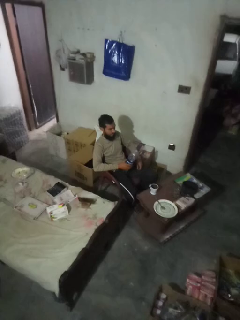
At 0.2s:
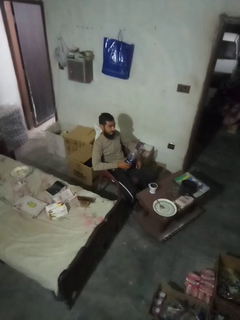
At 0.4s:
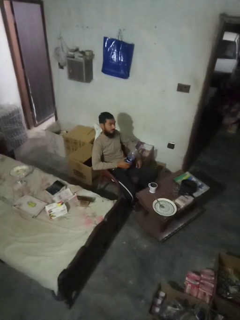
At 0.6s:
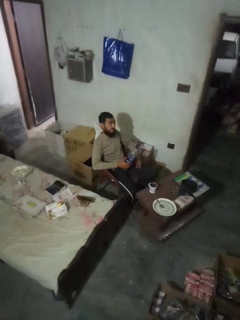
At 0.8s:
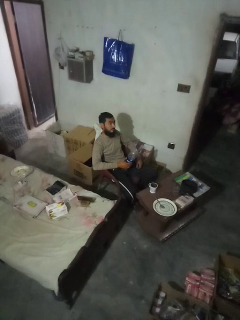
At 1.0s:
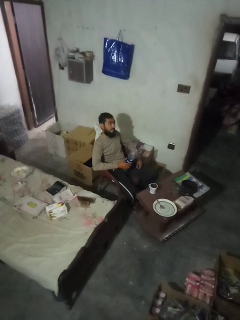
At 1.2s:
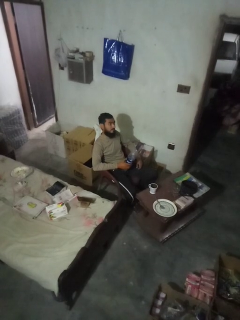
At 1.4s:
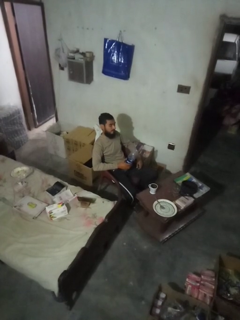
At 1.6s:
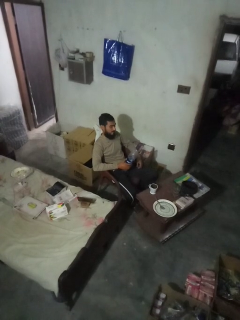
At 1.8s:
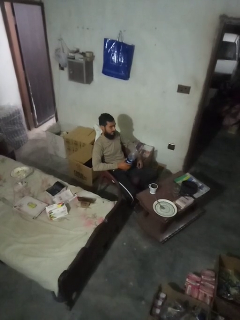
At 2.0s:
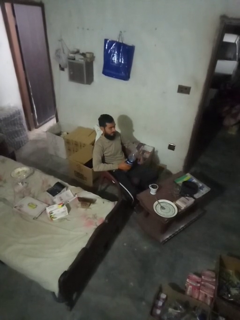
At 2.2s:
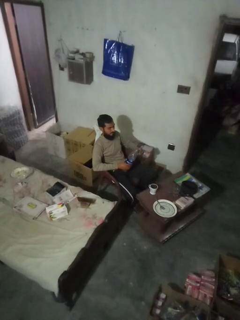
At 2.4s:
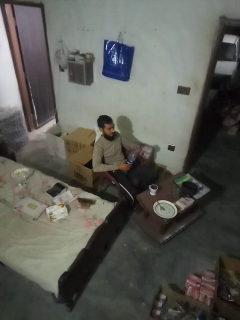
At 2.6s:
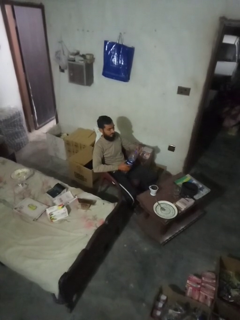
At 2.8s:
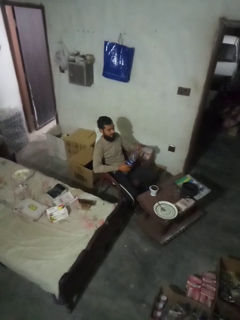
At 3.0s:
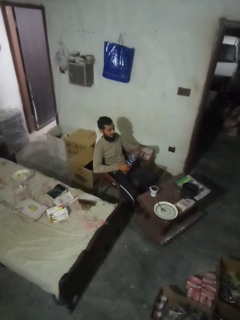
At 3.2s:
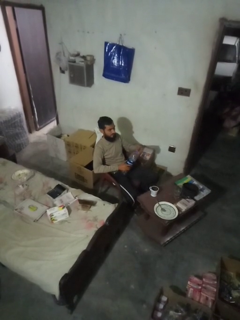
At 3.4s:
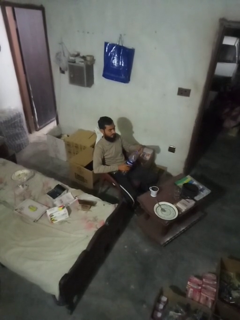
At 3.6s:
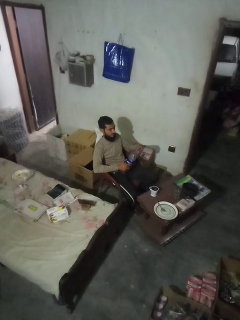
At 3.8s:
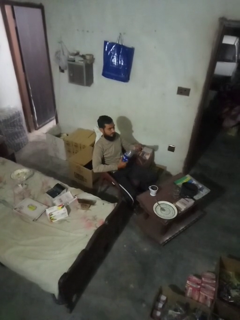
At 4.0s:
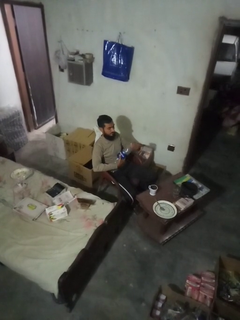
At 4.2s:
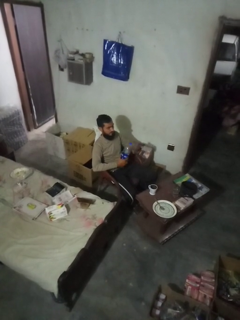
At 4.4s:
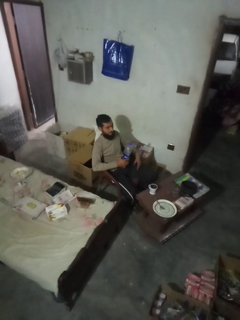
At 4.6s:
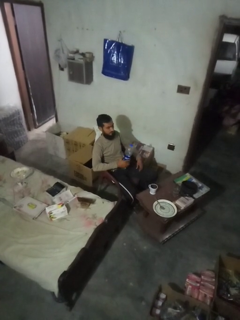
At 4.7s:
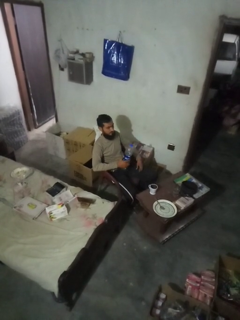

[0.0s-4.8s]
person screws lid to bottle

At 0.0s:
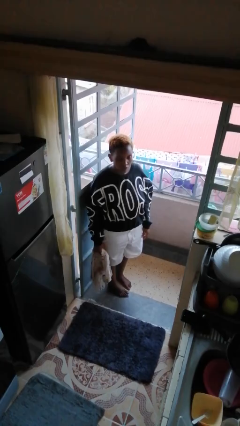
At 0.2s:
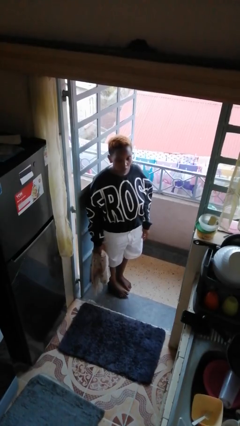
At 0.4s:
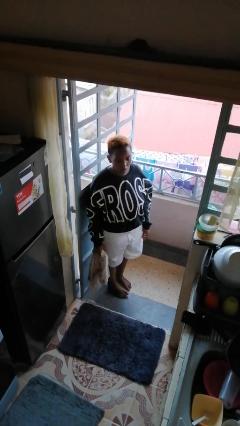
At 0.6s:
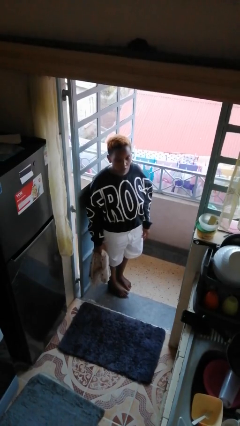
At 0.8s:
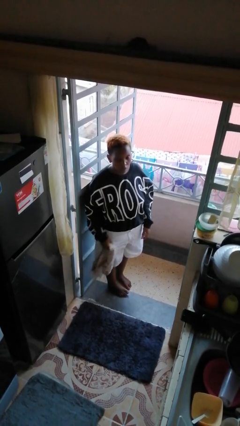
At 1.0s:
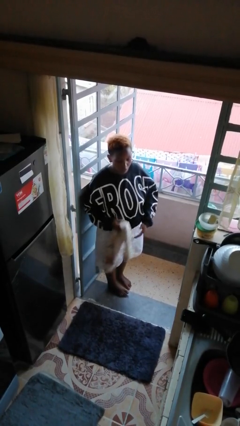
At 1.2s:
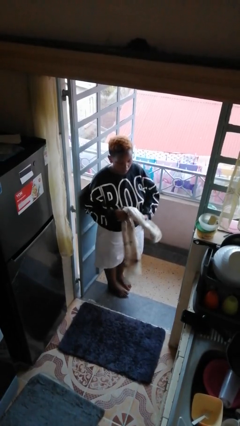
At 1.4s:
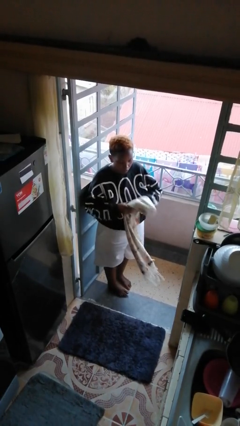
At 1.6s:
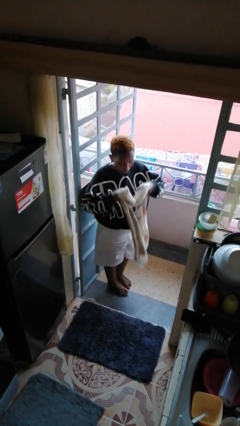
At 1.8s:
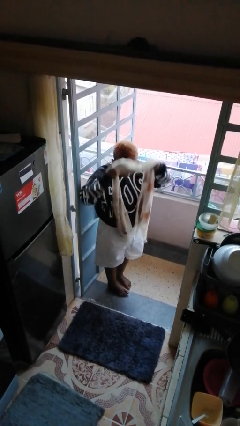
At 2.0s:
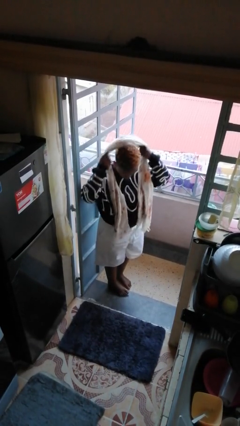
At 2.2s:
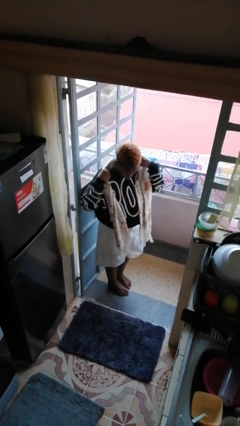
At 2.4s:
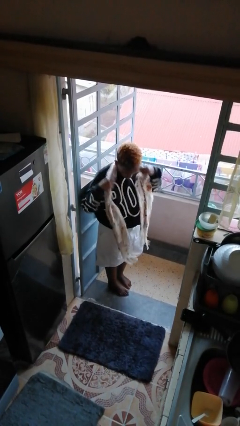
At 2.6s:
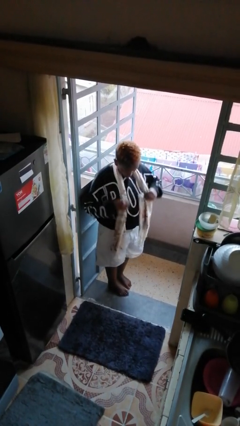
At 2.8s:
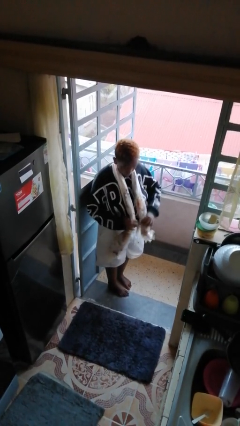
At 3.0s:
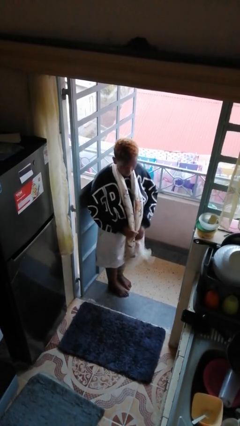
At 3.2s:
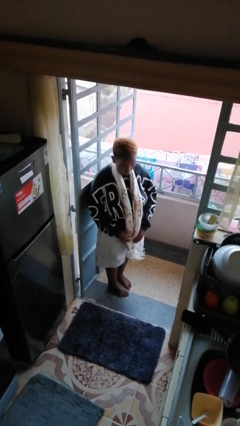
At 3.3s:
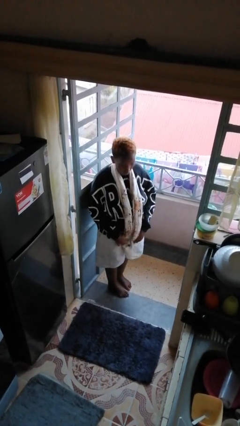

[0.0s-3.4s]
person puts on scarf

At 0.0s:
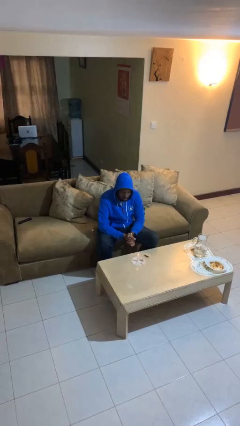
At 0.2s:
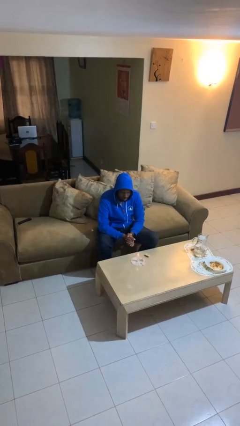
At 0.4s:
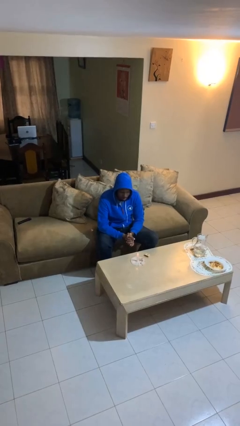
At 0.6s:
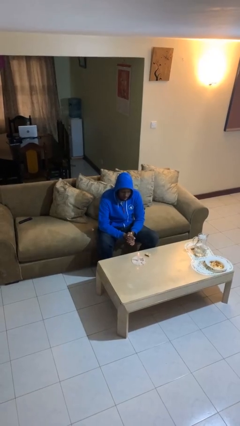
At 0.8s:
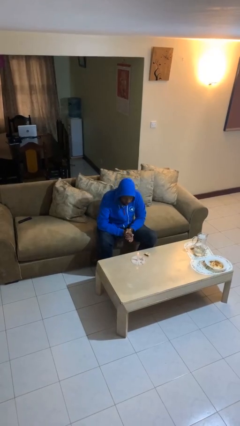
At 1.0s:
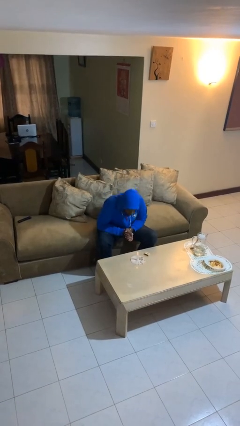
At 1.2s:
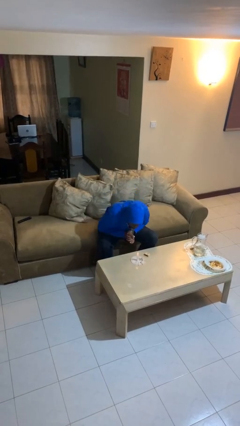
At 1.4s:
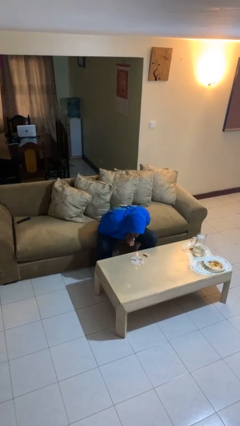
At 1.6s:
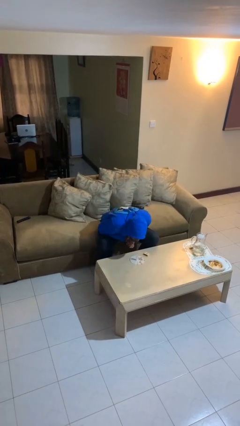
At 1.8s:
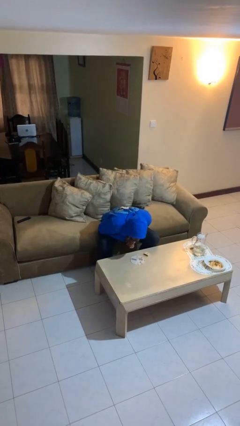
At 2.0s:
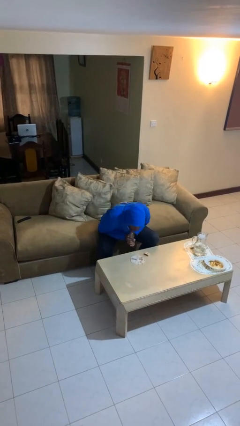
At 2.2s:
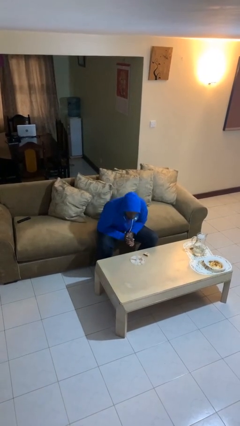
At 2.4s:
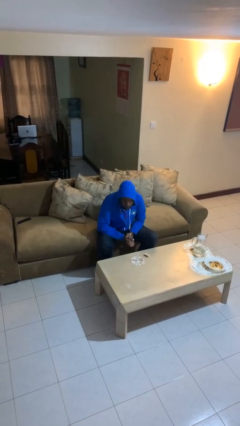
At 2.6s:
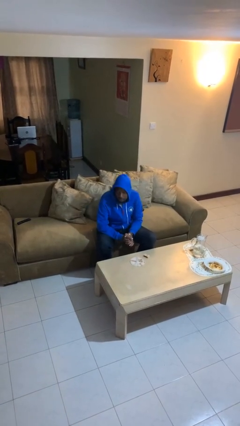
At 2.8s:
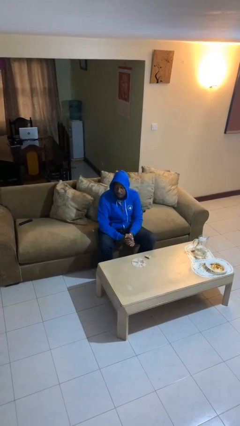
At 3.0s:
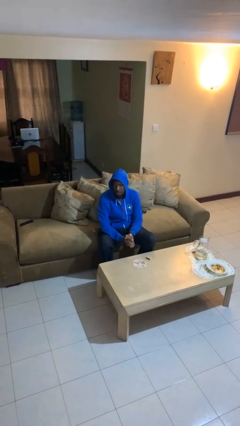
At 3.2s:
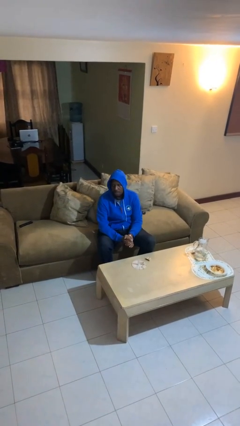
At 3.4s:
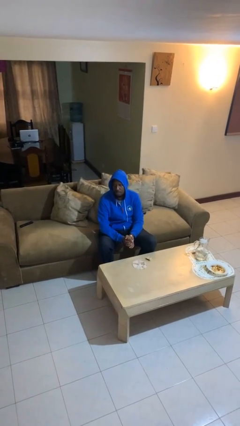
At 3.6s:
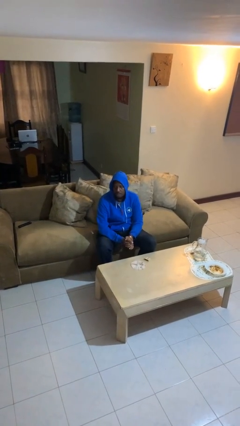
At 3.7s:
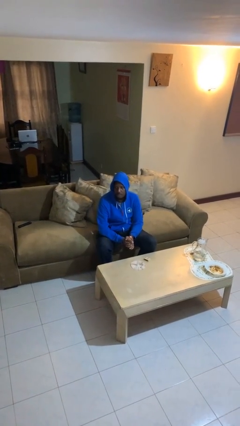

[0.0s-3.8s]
person extinguishes candle

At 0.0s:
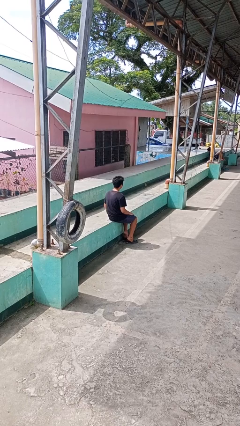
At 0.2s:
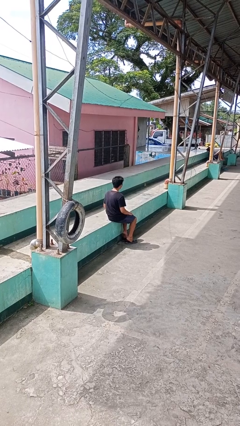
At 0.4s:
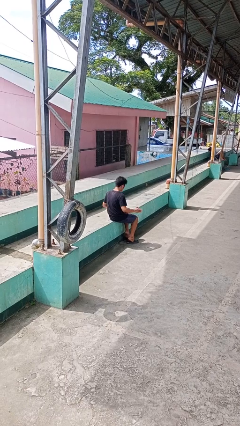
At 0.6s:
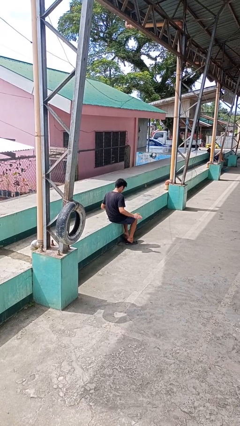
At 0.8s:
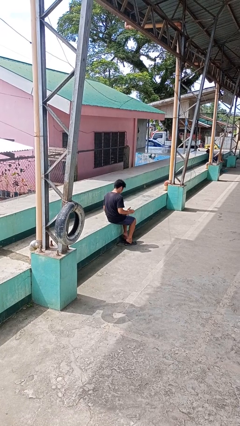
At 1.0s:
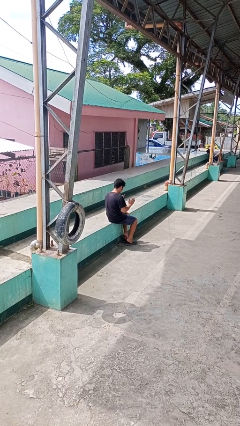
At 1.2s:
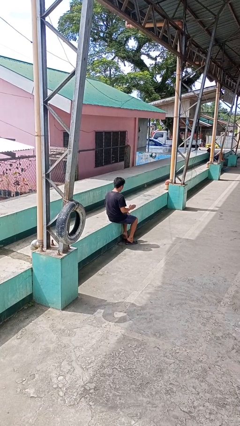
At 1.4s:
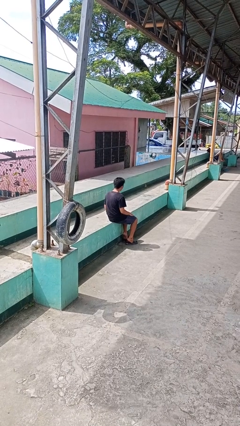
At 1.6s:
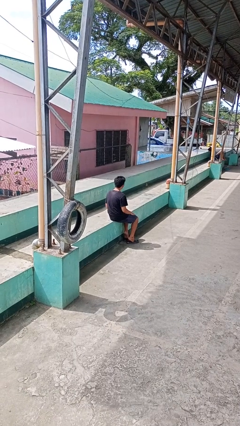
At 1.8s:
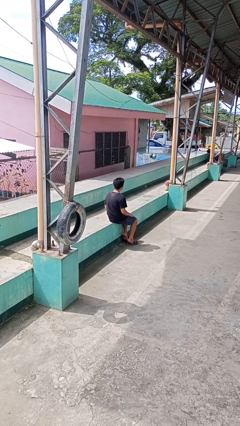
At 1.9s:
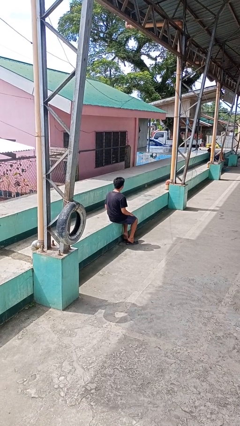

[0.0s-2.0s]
person slaps hands on thighs

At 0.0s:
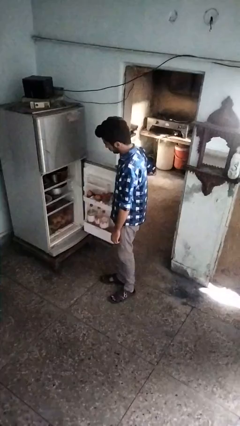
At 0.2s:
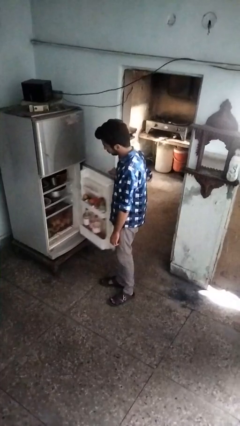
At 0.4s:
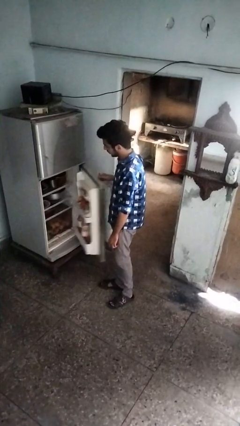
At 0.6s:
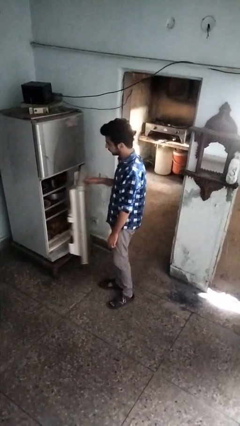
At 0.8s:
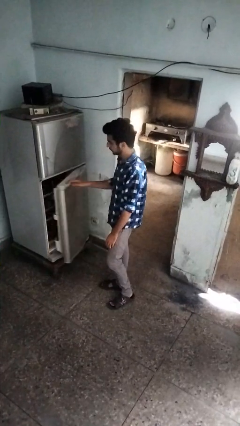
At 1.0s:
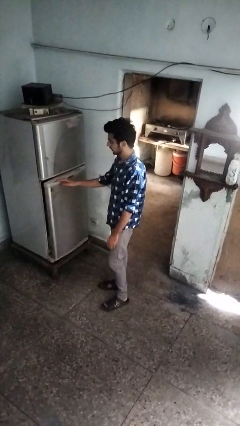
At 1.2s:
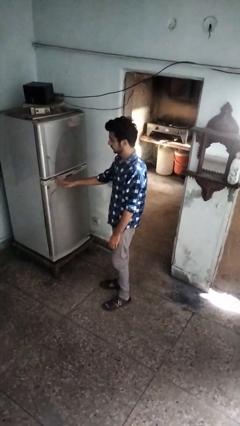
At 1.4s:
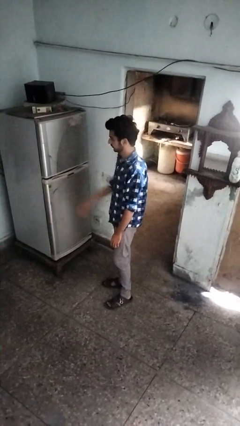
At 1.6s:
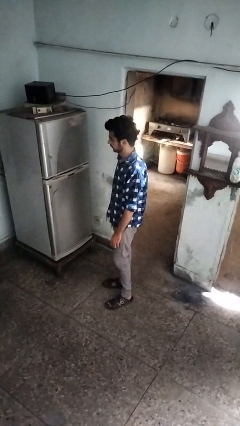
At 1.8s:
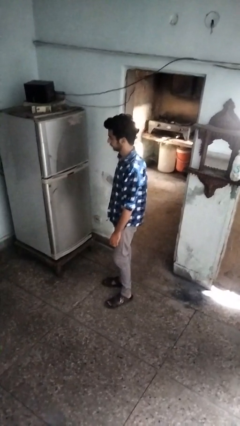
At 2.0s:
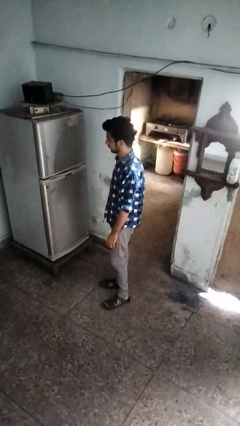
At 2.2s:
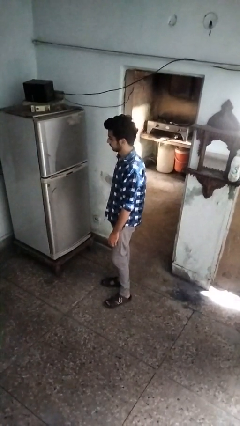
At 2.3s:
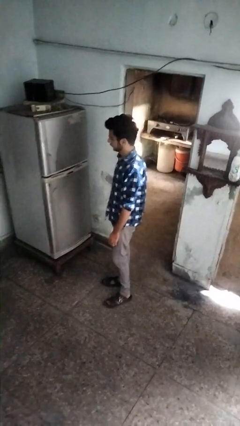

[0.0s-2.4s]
person closes refrigerator

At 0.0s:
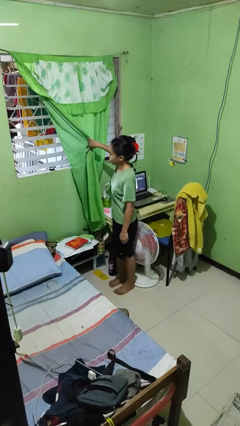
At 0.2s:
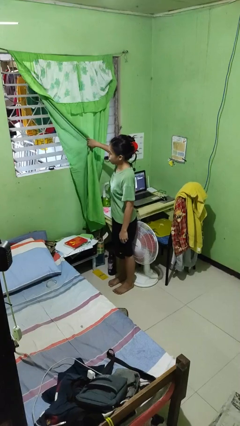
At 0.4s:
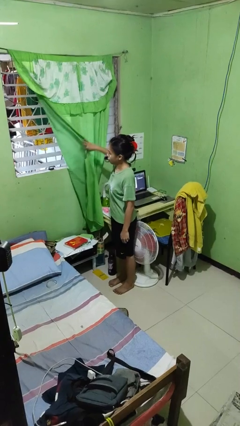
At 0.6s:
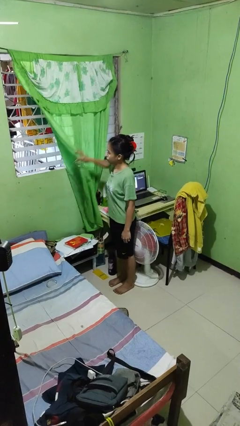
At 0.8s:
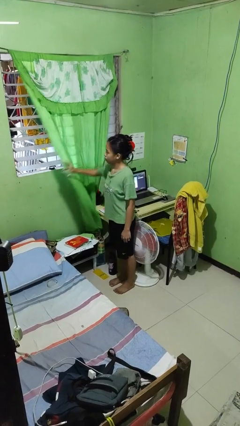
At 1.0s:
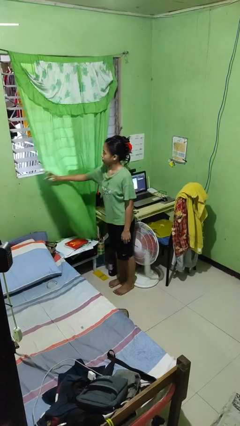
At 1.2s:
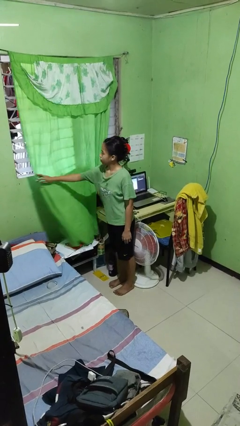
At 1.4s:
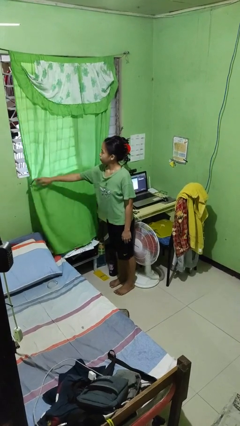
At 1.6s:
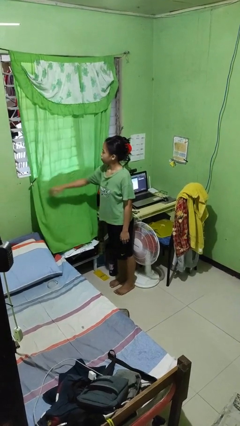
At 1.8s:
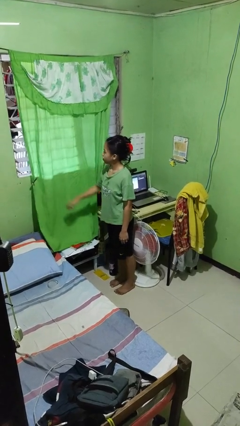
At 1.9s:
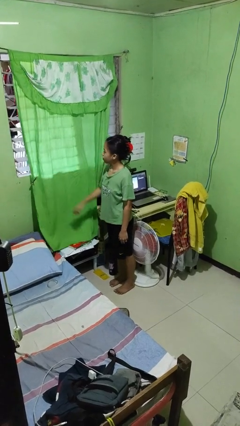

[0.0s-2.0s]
person closes curtains
